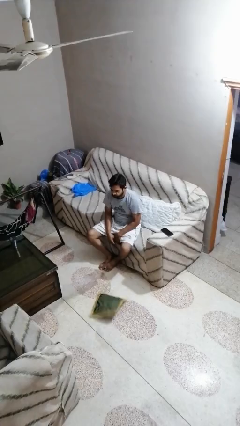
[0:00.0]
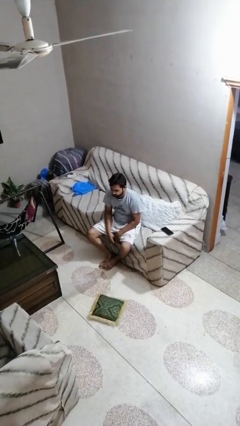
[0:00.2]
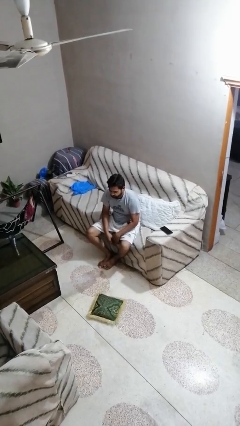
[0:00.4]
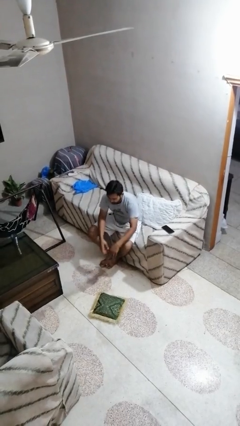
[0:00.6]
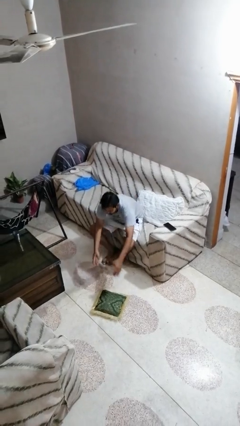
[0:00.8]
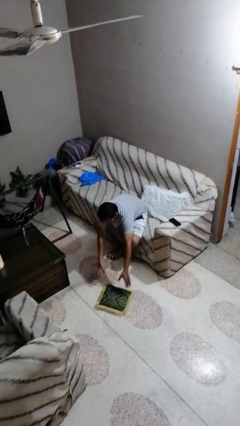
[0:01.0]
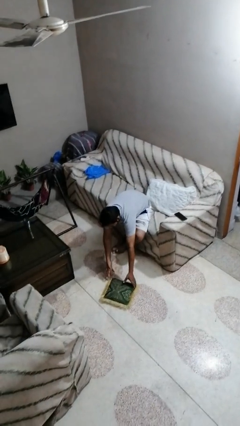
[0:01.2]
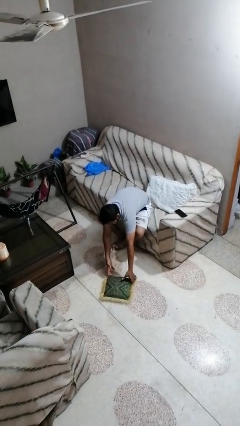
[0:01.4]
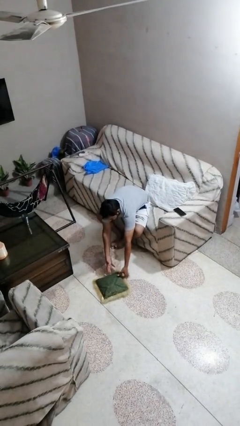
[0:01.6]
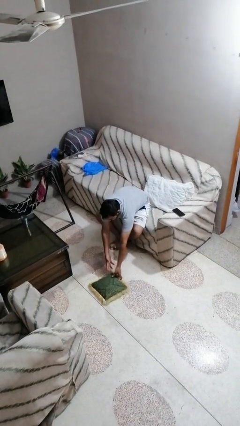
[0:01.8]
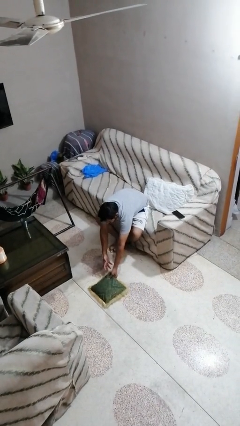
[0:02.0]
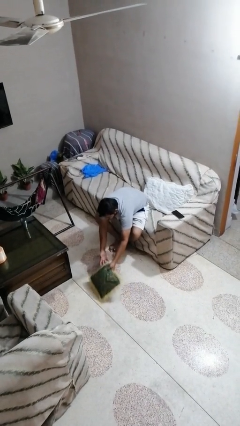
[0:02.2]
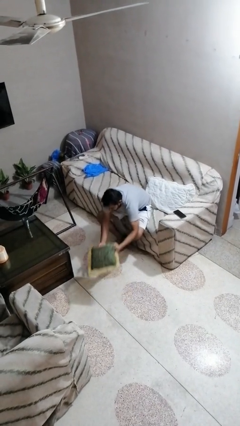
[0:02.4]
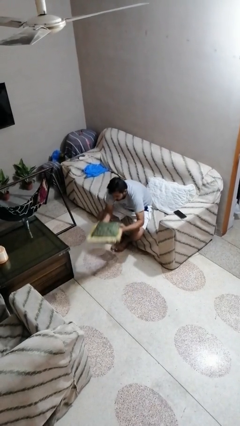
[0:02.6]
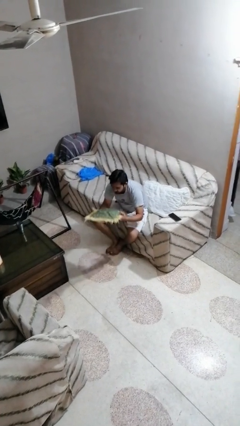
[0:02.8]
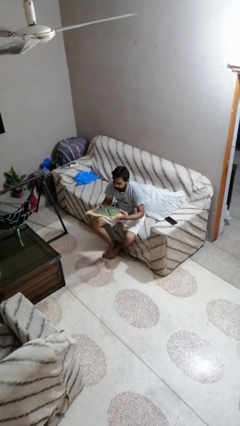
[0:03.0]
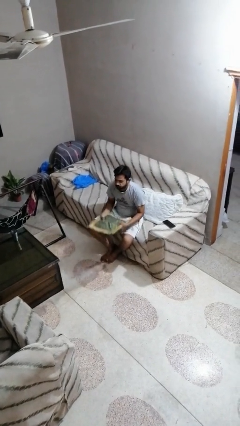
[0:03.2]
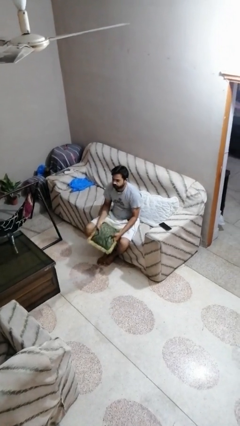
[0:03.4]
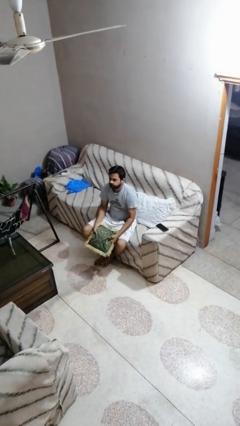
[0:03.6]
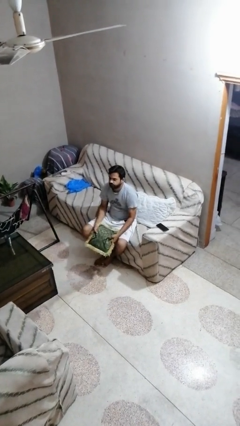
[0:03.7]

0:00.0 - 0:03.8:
person picks up object from floor

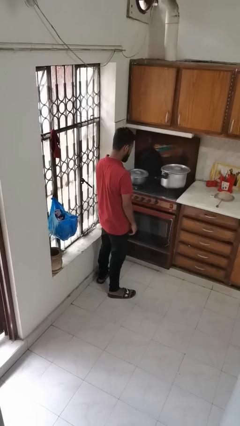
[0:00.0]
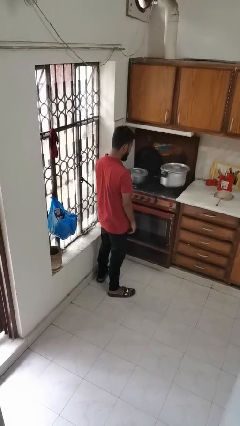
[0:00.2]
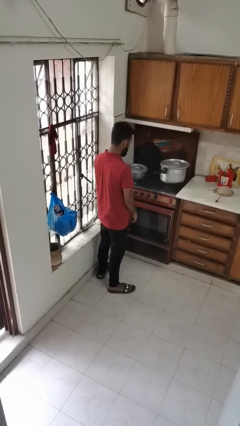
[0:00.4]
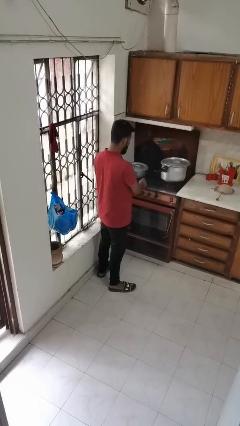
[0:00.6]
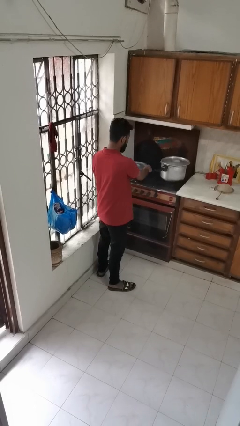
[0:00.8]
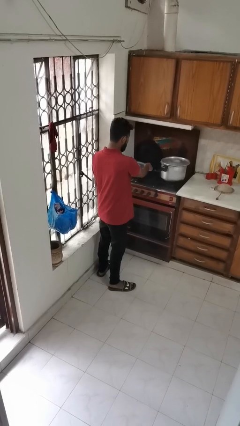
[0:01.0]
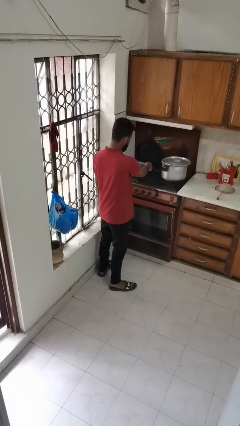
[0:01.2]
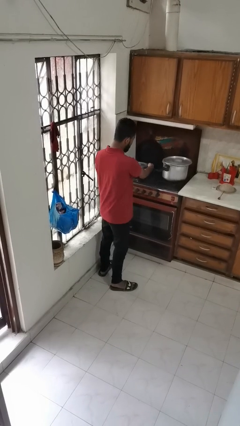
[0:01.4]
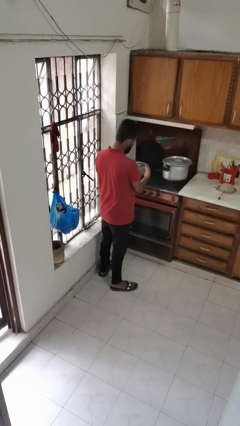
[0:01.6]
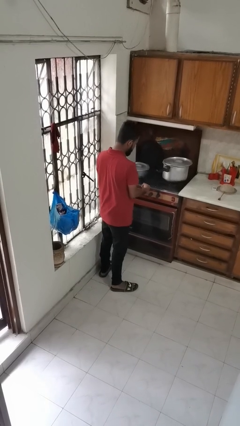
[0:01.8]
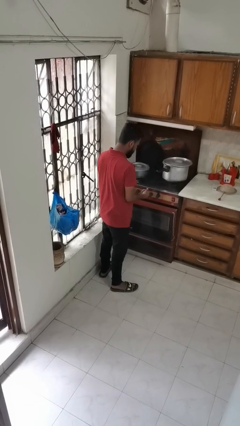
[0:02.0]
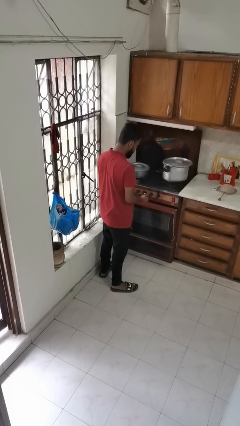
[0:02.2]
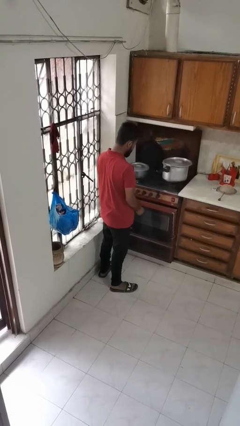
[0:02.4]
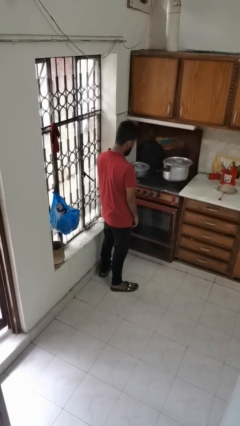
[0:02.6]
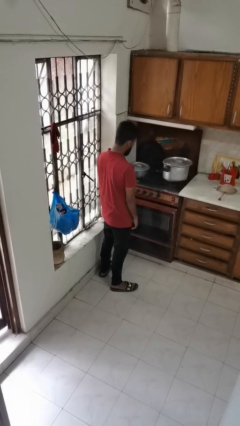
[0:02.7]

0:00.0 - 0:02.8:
person burns hand

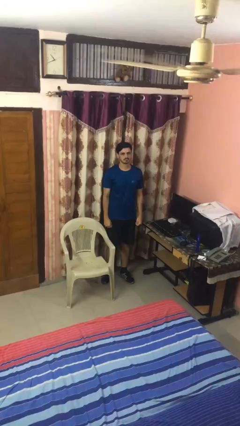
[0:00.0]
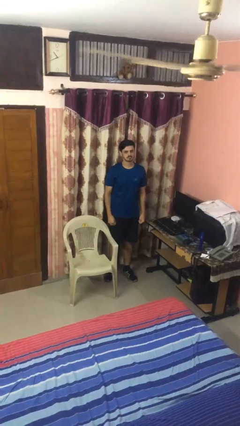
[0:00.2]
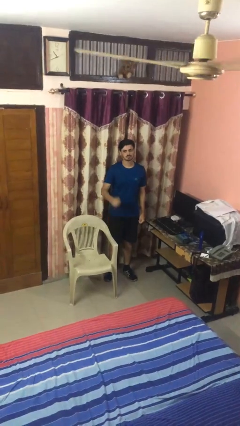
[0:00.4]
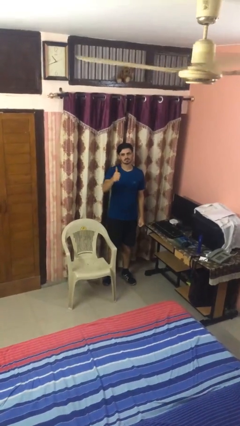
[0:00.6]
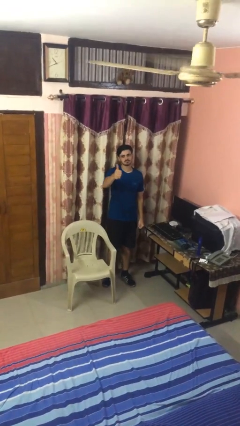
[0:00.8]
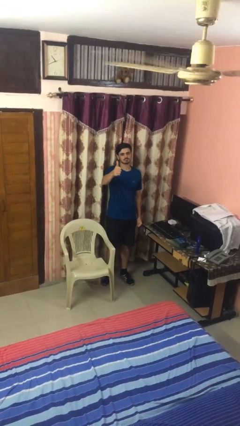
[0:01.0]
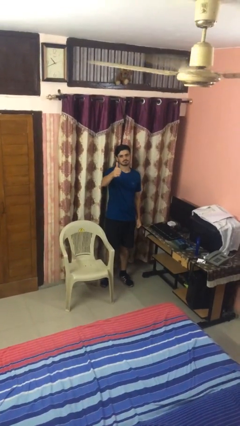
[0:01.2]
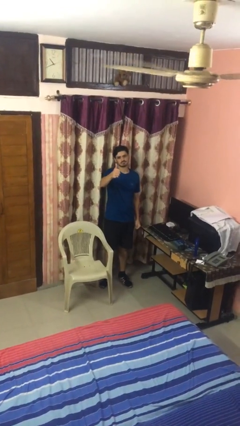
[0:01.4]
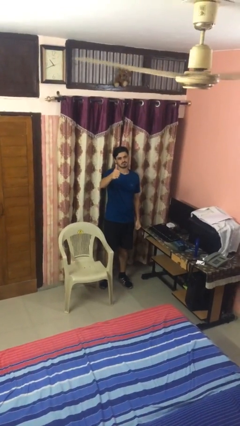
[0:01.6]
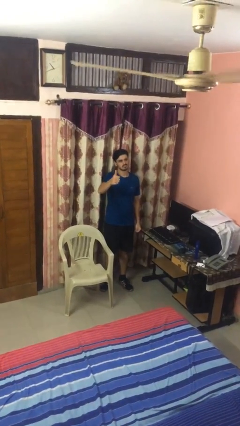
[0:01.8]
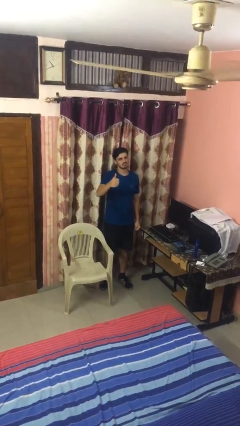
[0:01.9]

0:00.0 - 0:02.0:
person gestures thumbs up

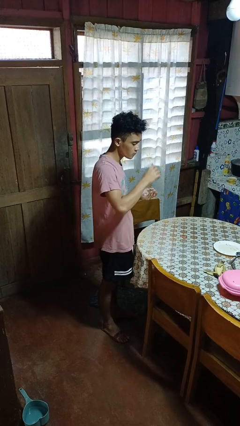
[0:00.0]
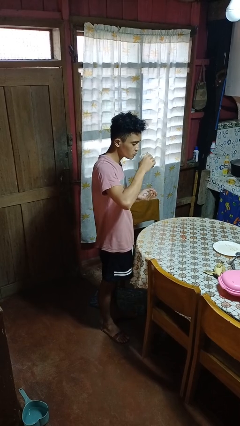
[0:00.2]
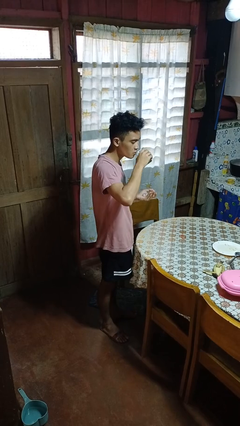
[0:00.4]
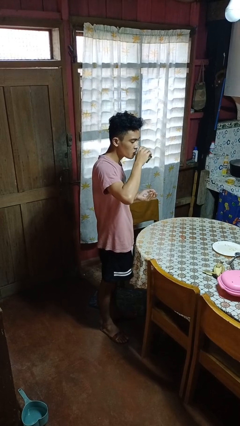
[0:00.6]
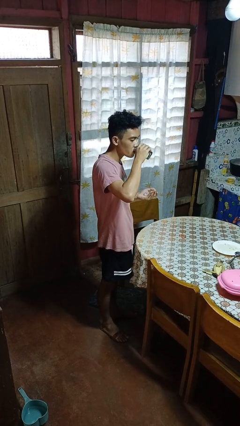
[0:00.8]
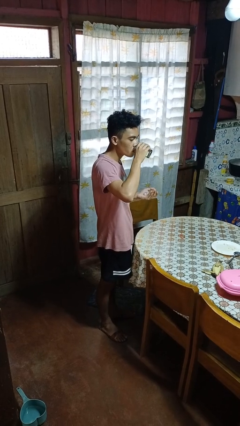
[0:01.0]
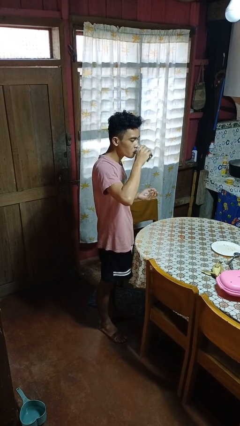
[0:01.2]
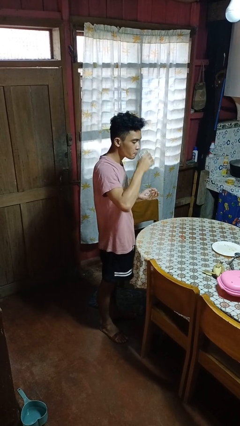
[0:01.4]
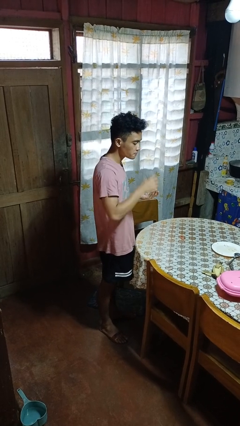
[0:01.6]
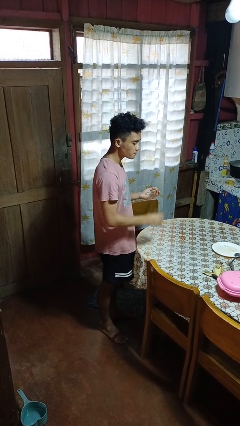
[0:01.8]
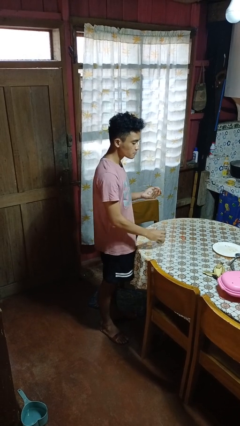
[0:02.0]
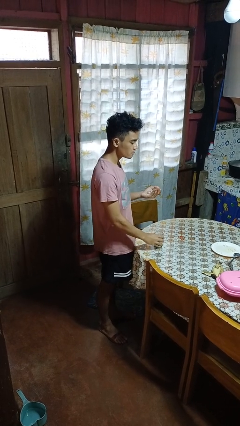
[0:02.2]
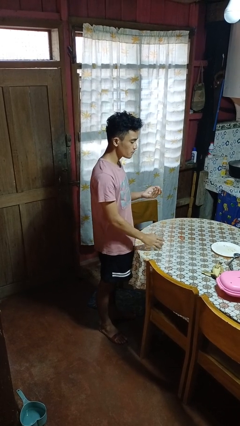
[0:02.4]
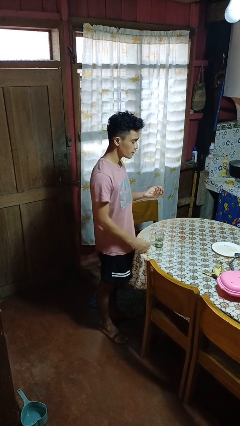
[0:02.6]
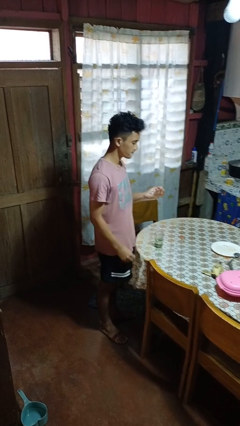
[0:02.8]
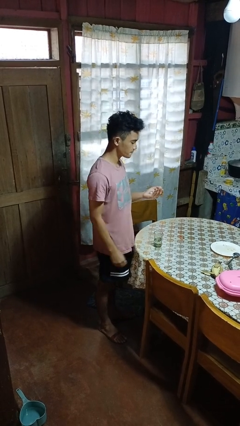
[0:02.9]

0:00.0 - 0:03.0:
person drinks from cup

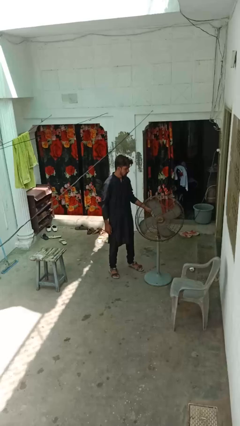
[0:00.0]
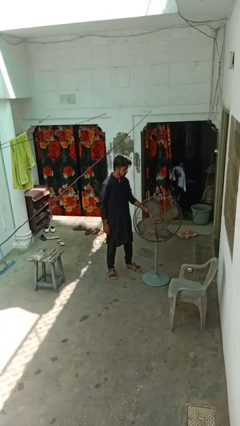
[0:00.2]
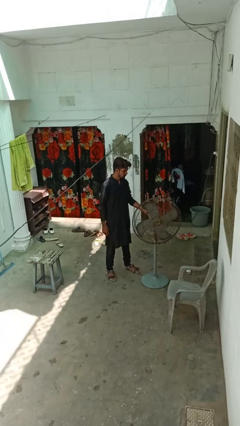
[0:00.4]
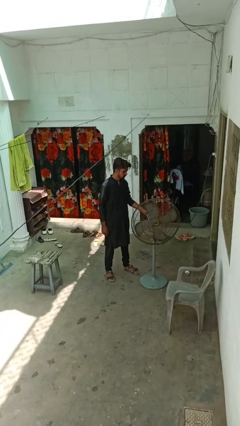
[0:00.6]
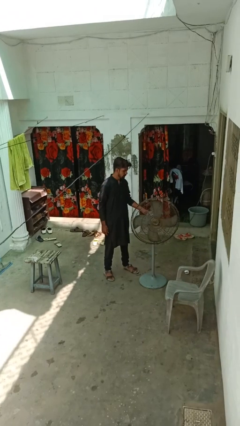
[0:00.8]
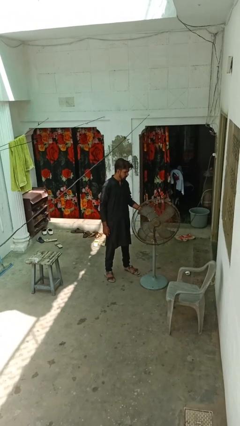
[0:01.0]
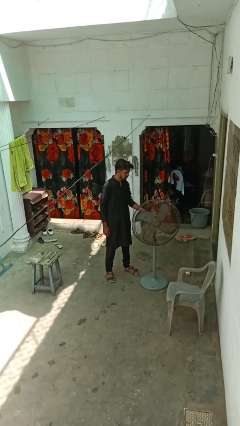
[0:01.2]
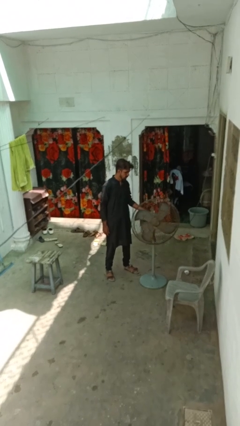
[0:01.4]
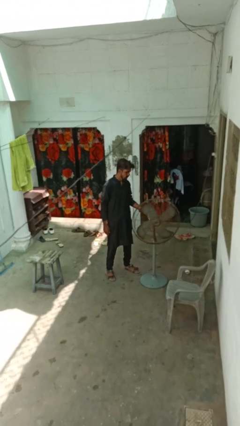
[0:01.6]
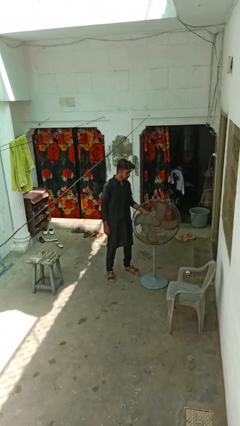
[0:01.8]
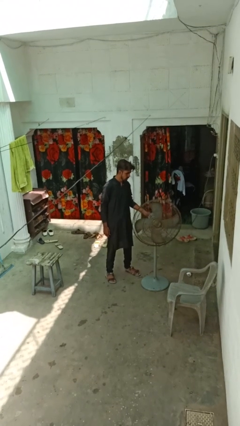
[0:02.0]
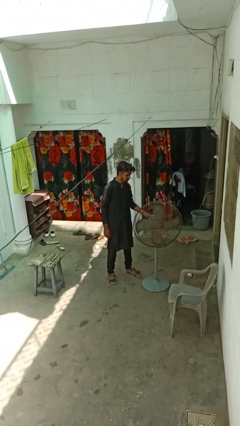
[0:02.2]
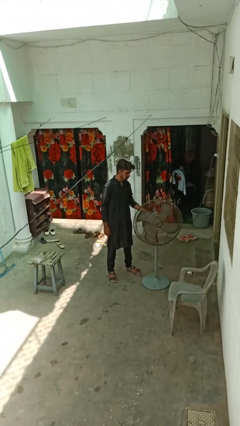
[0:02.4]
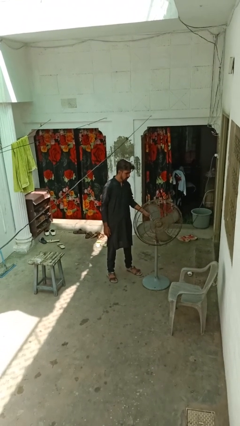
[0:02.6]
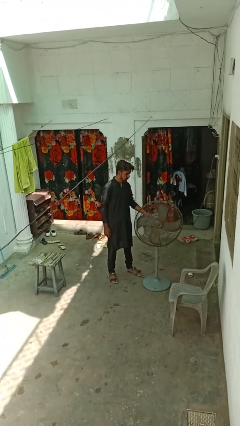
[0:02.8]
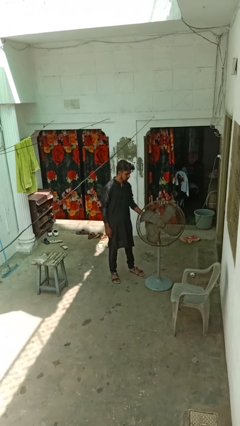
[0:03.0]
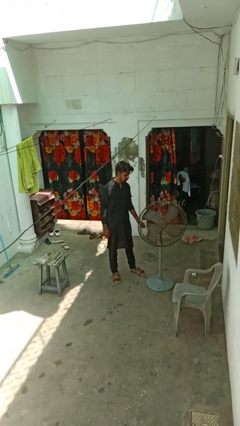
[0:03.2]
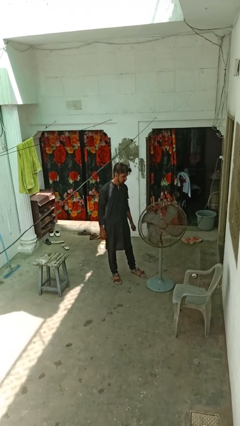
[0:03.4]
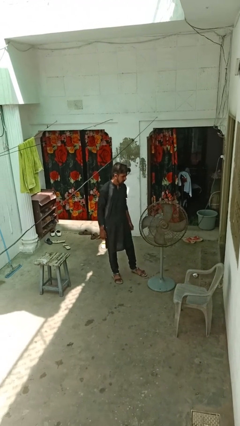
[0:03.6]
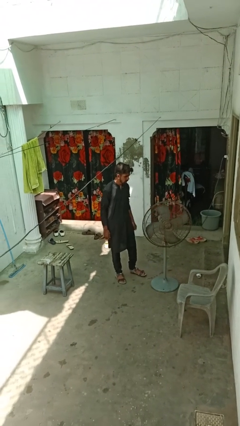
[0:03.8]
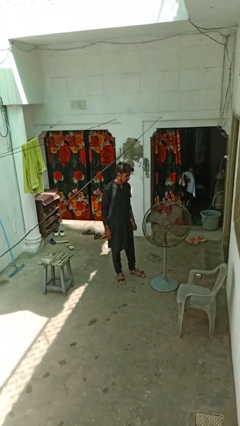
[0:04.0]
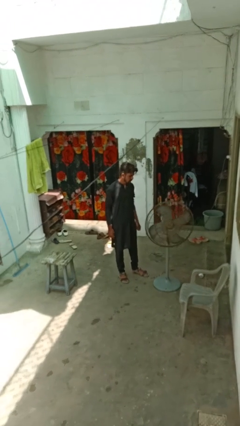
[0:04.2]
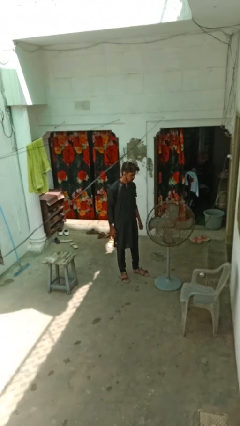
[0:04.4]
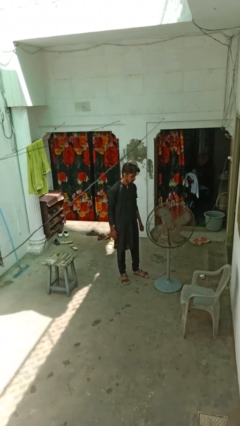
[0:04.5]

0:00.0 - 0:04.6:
person turns on fan

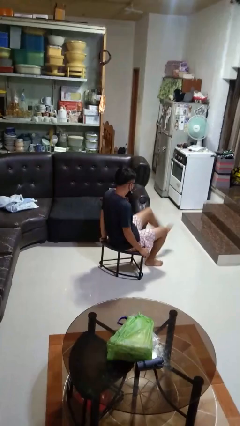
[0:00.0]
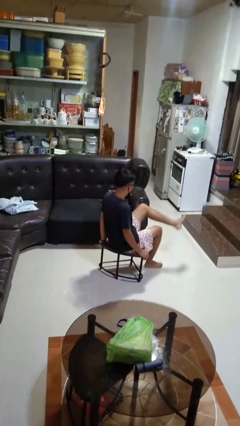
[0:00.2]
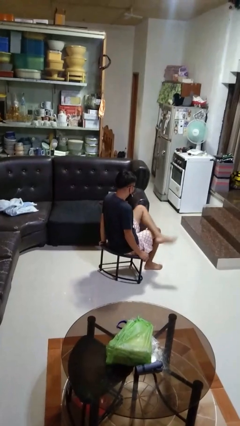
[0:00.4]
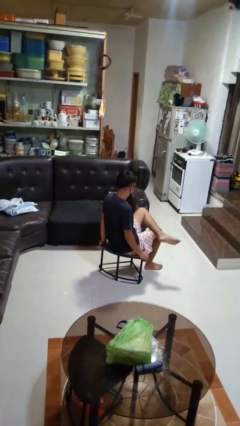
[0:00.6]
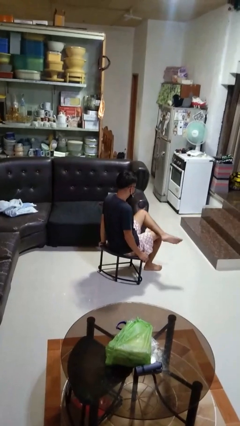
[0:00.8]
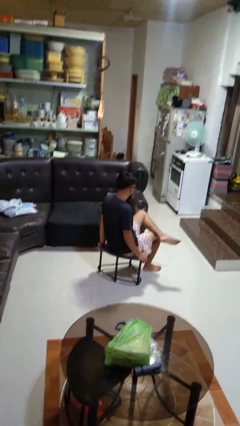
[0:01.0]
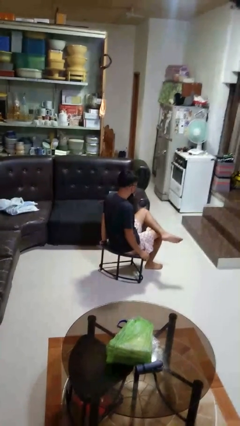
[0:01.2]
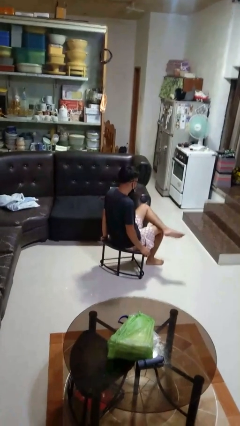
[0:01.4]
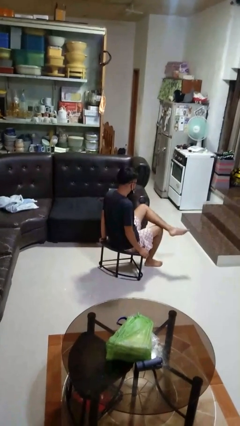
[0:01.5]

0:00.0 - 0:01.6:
person crosses legs
